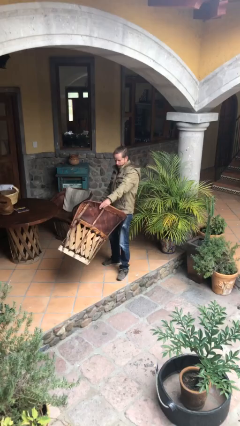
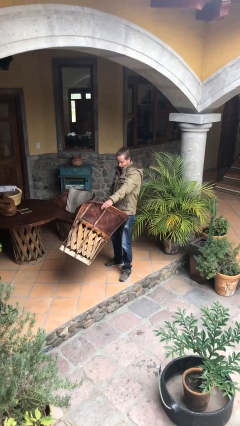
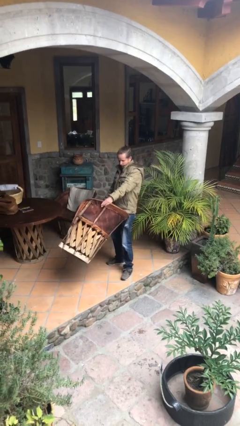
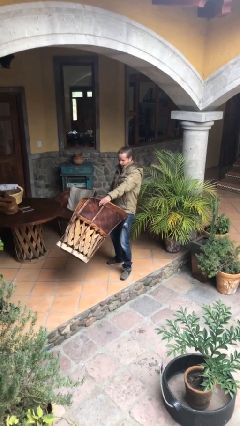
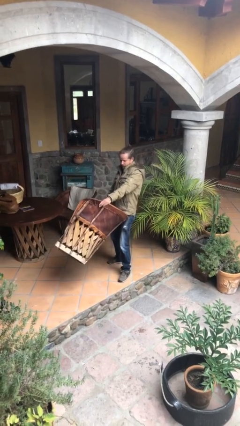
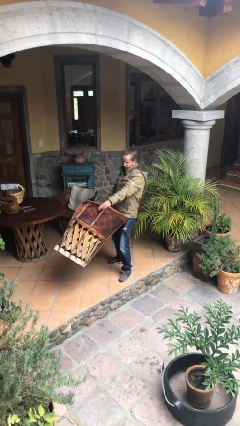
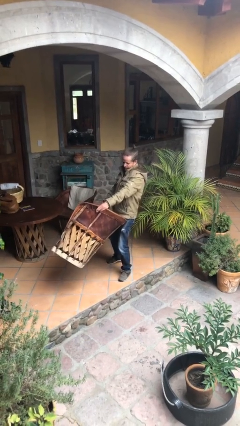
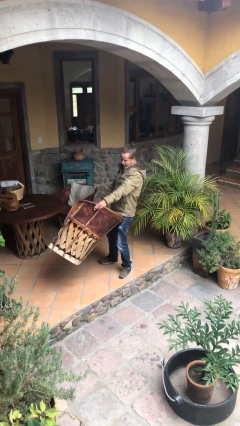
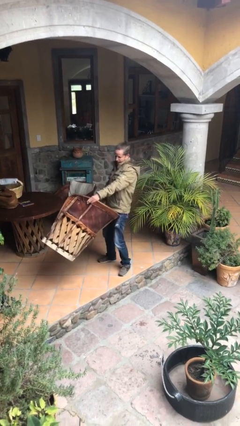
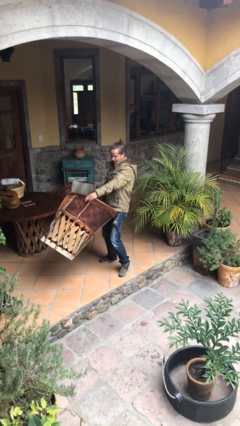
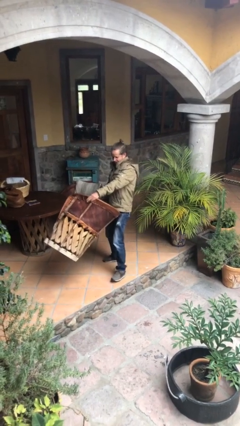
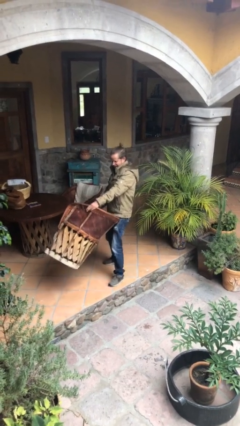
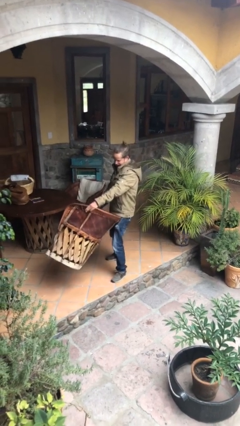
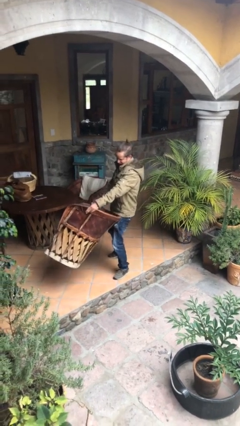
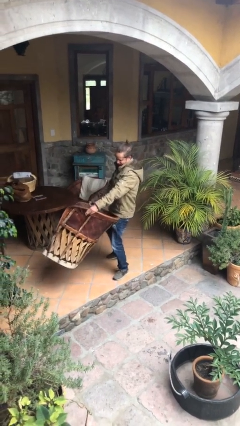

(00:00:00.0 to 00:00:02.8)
person carries heavy object

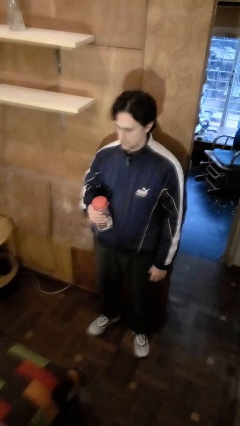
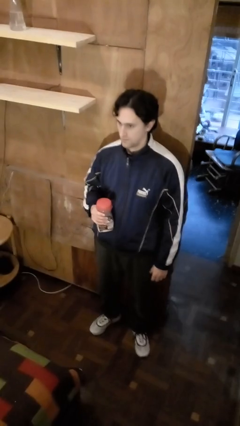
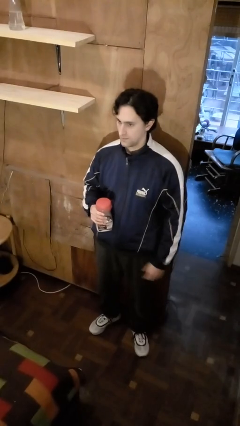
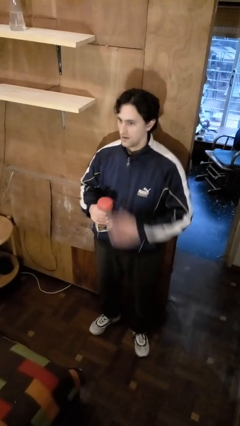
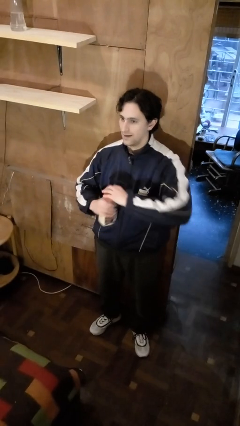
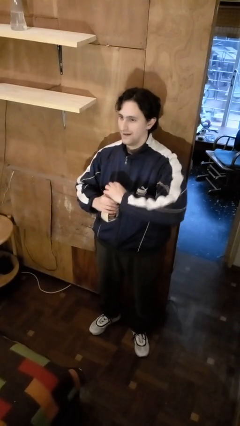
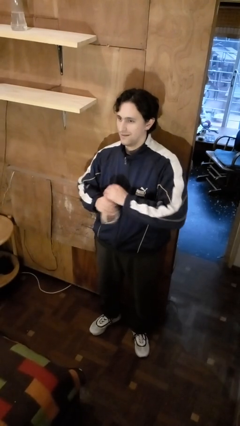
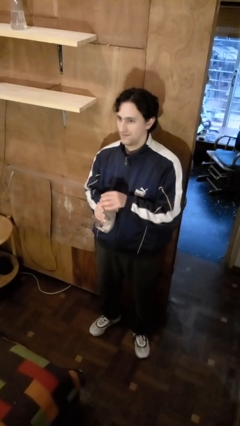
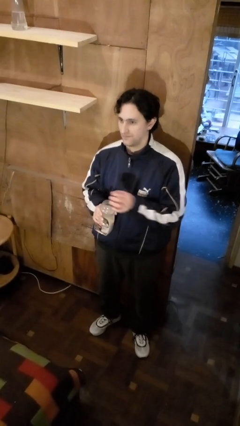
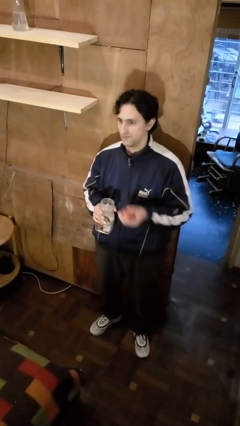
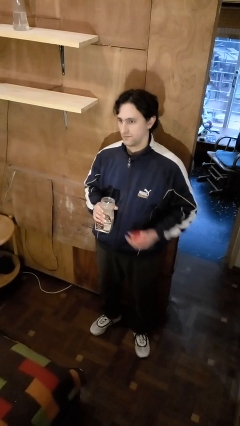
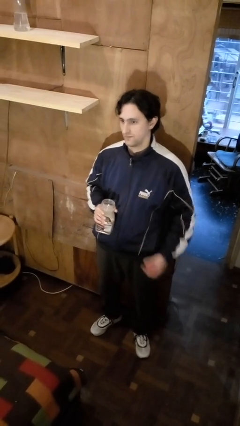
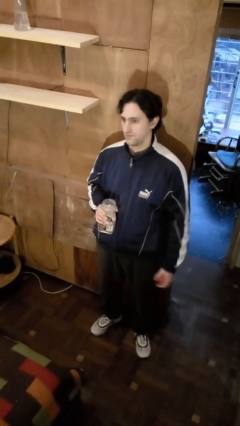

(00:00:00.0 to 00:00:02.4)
person opens jar

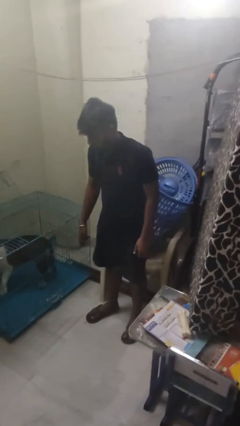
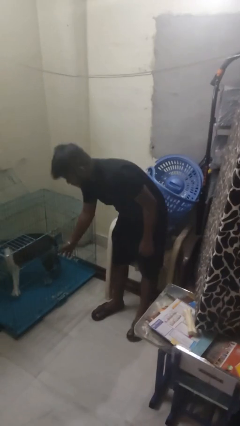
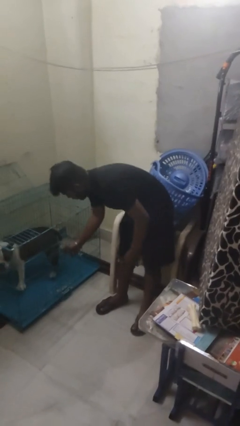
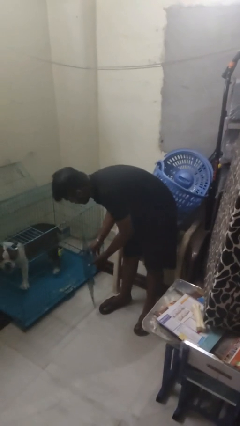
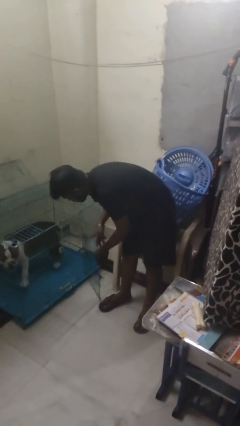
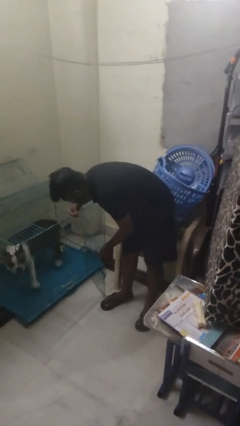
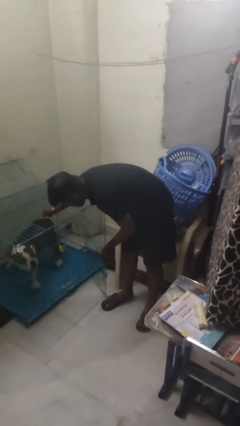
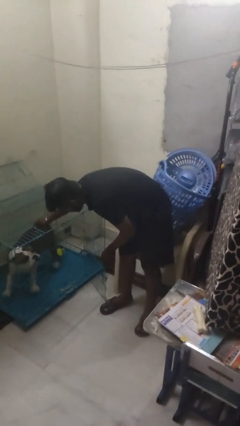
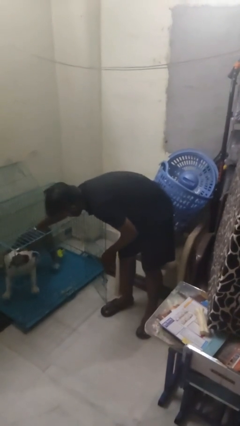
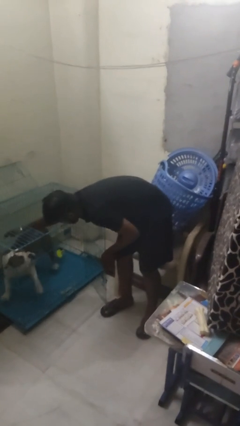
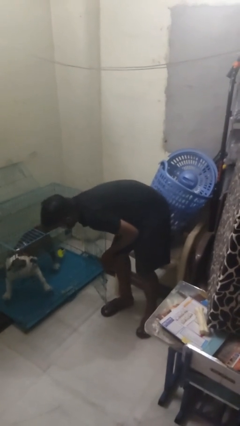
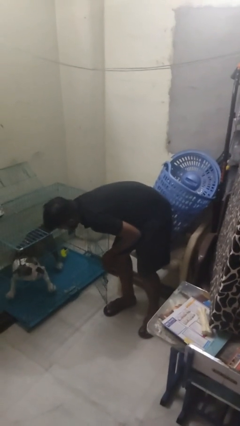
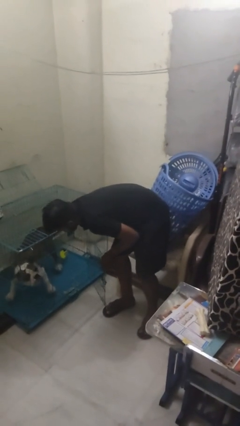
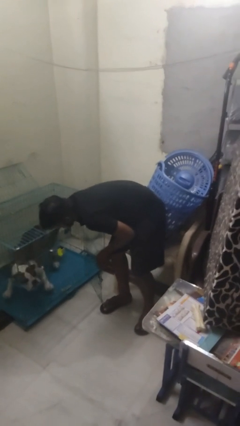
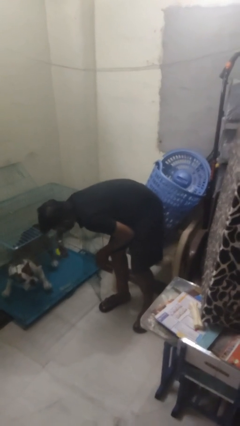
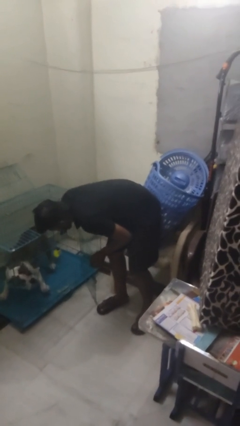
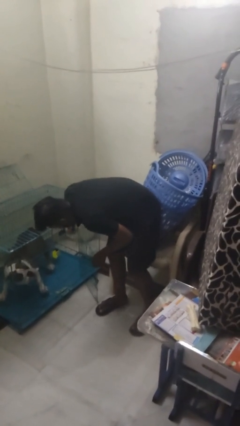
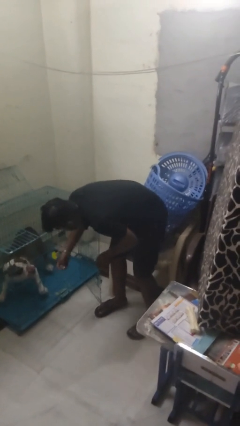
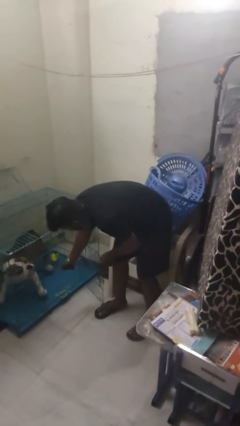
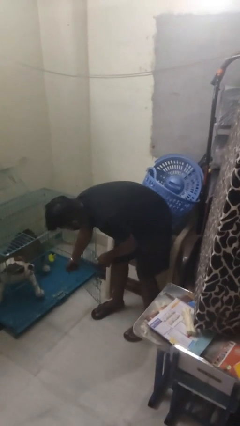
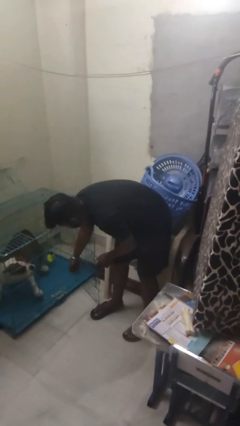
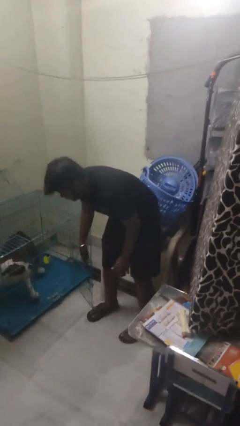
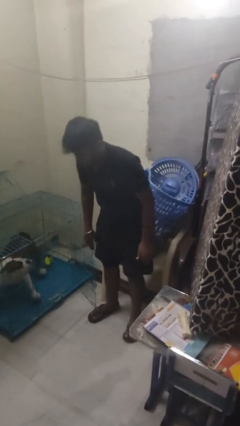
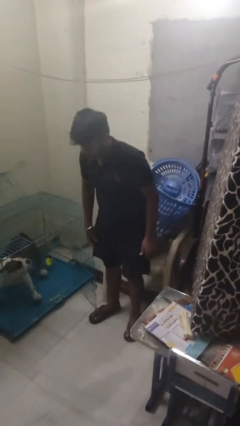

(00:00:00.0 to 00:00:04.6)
person uncrates dog

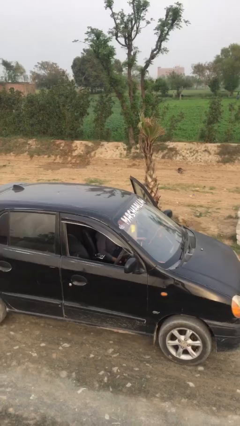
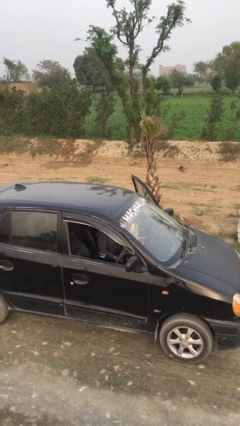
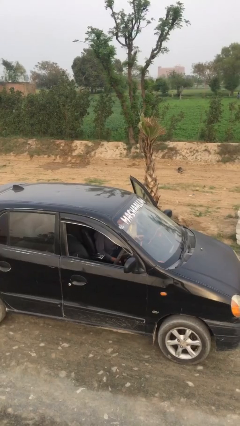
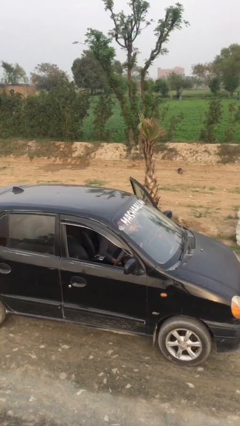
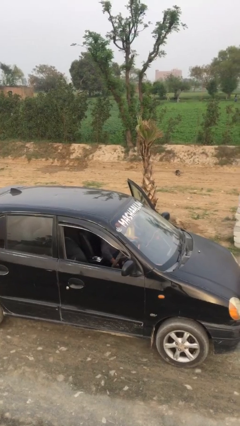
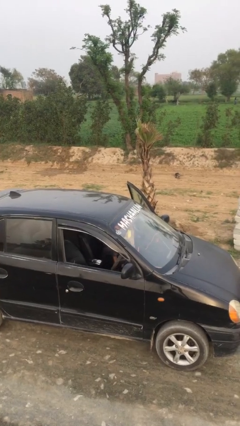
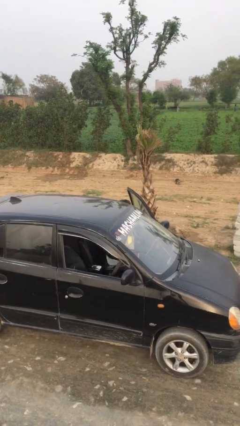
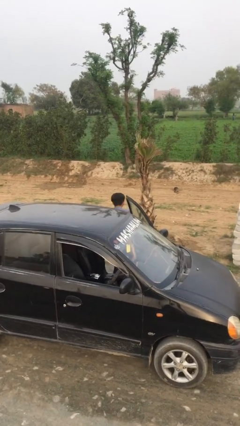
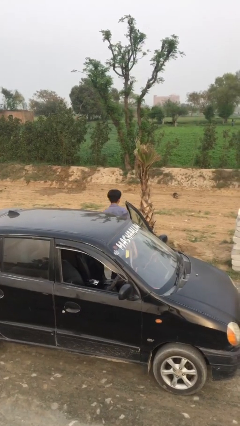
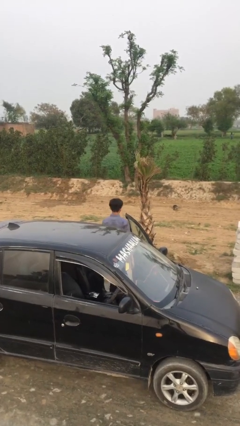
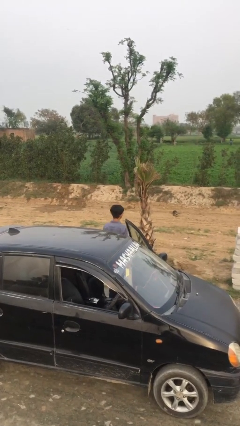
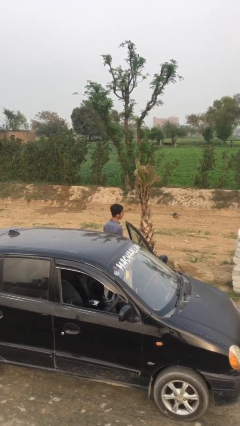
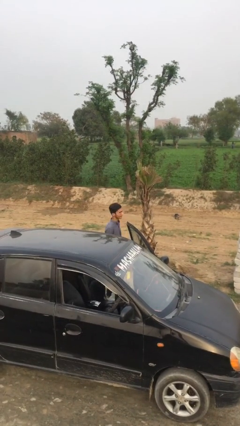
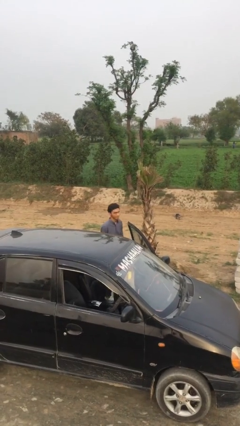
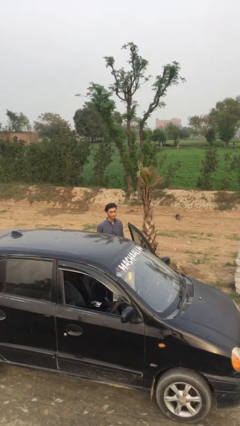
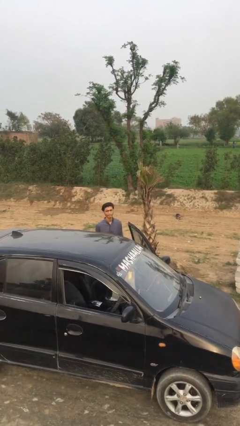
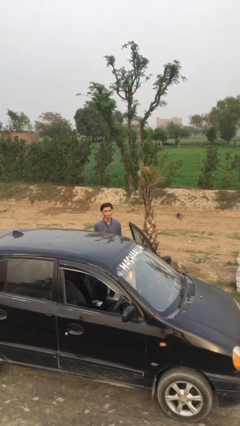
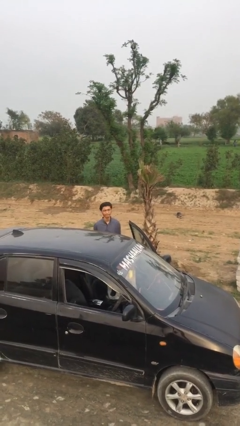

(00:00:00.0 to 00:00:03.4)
person exits car

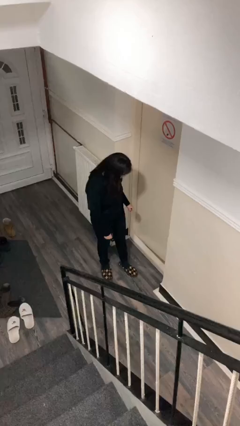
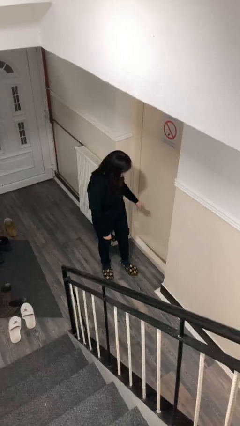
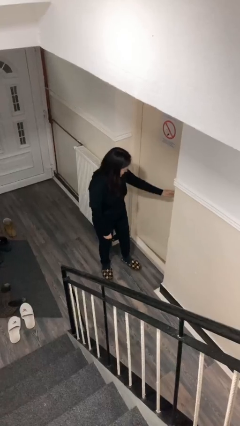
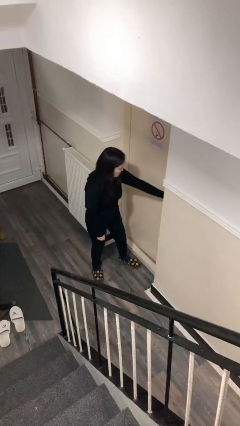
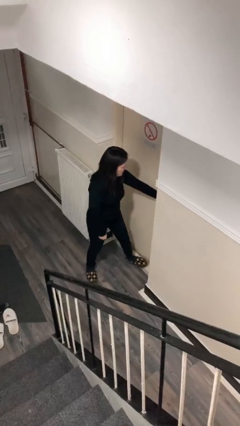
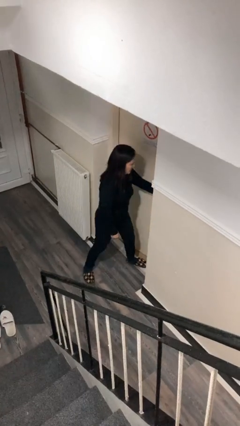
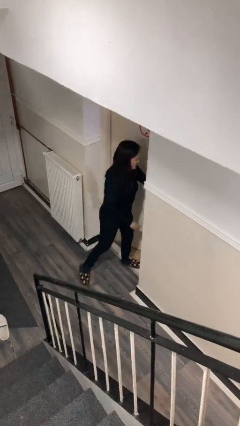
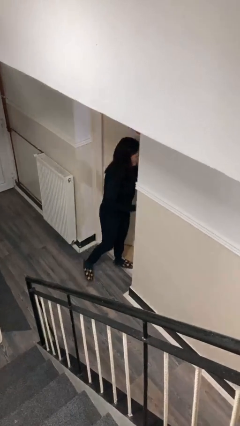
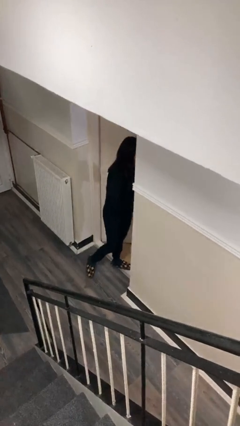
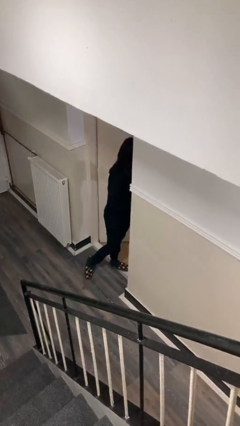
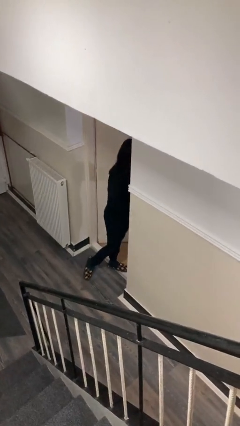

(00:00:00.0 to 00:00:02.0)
person opens facility door

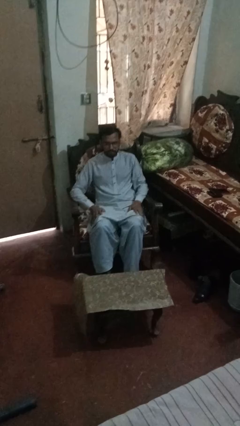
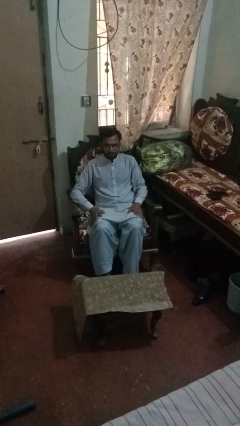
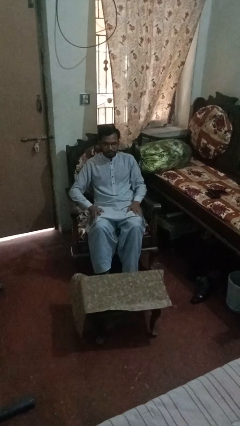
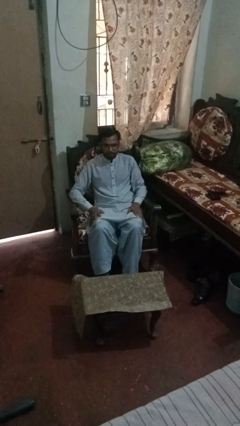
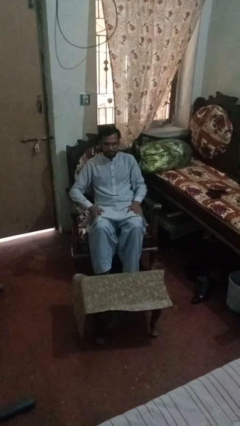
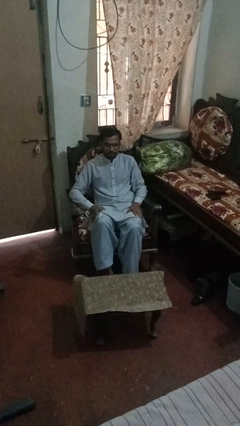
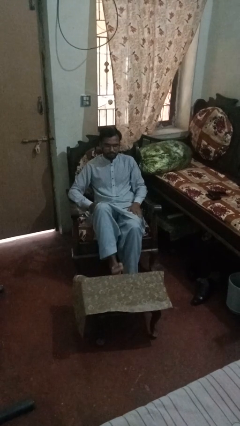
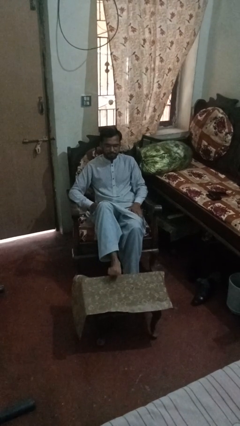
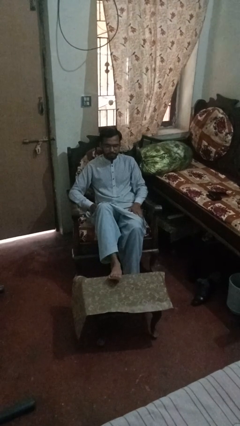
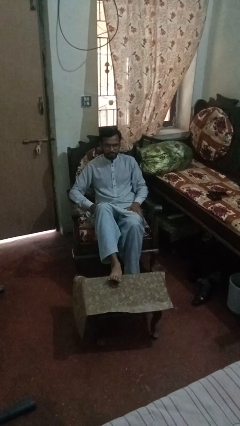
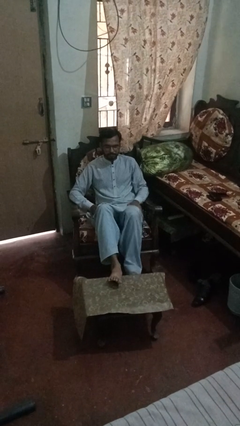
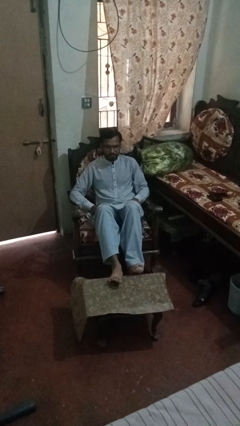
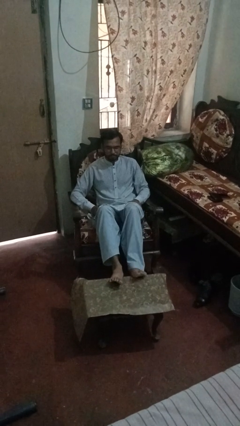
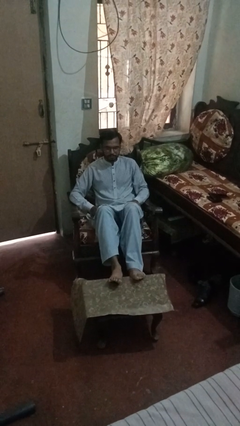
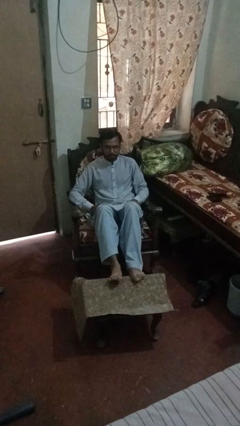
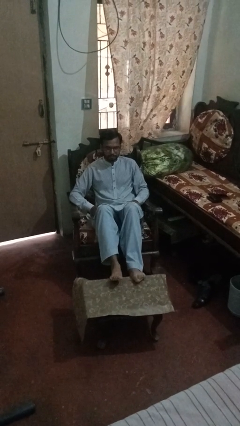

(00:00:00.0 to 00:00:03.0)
person puts feet up
